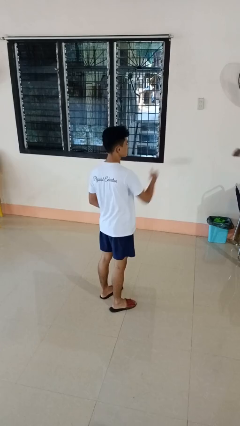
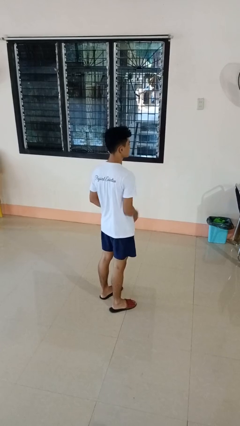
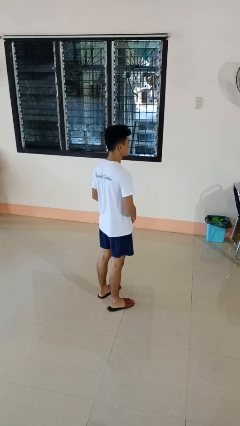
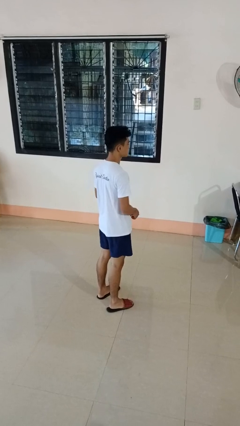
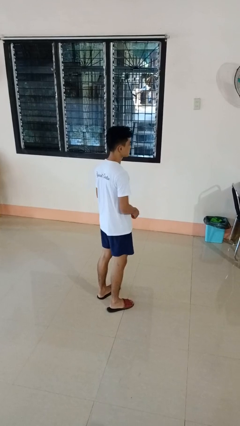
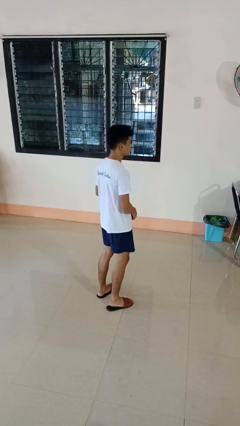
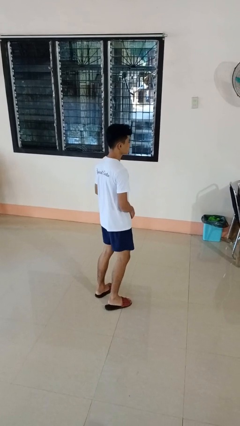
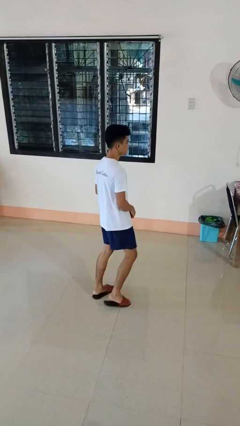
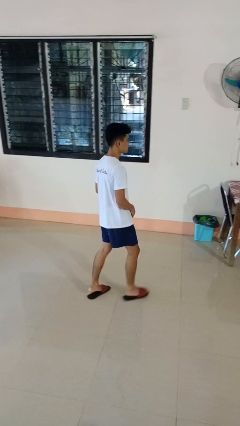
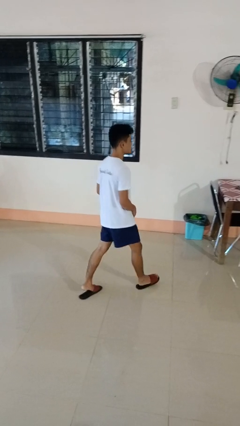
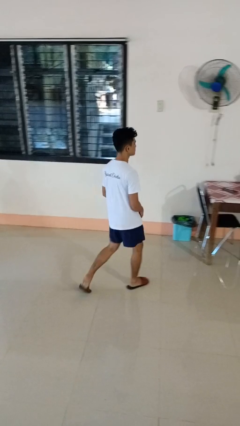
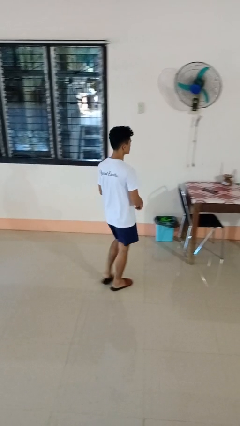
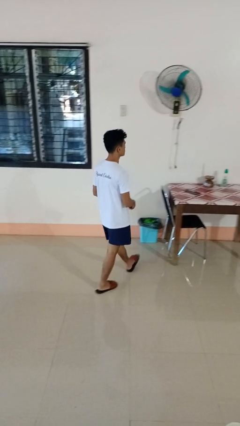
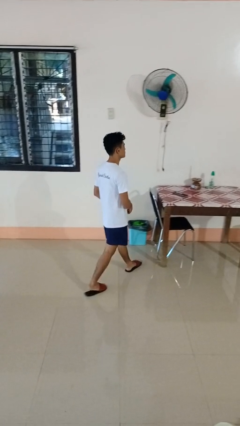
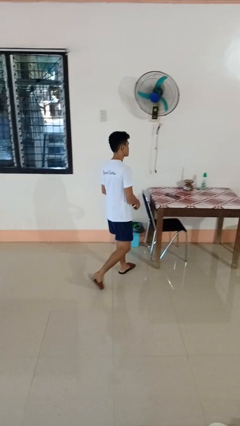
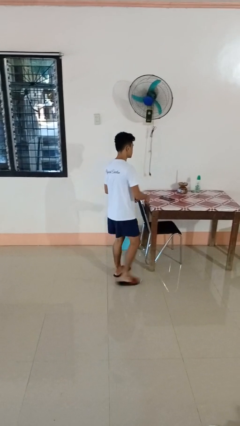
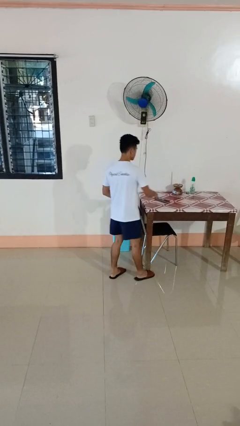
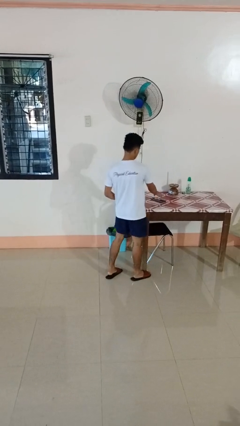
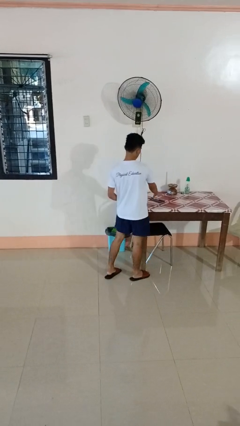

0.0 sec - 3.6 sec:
person throws object on table

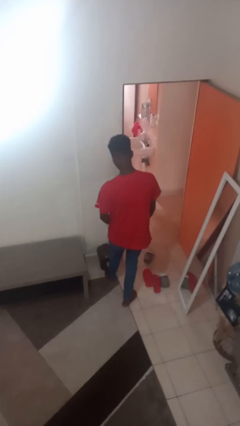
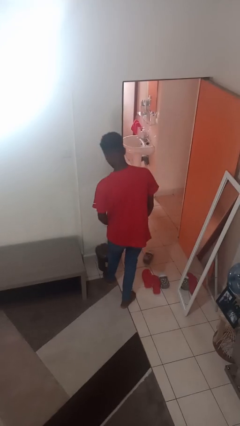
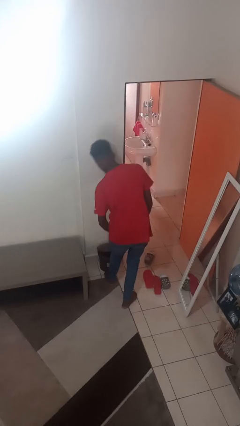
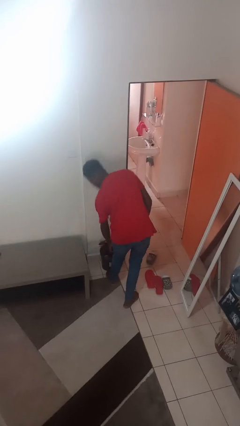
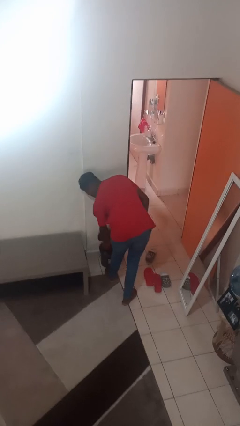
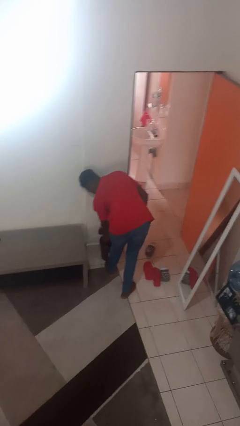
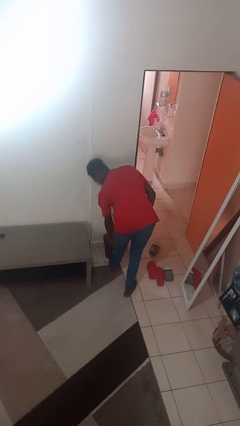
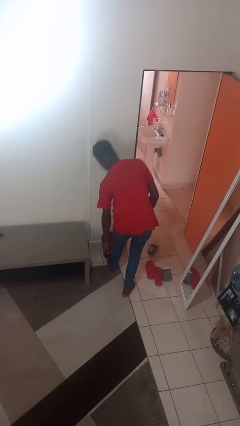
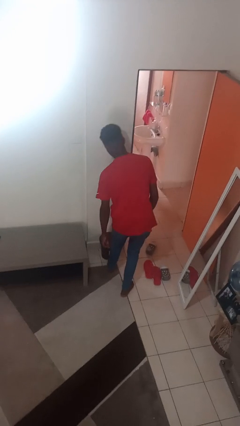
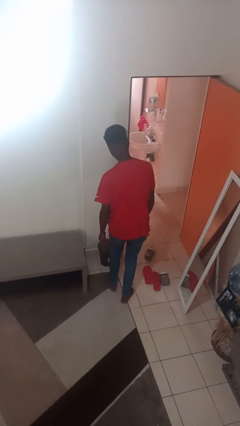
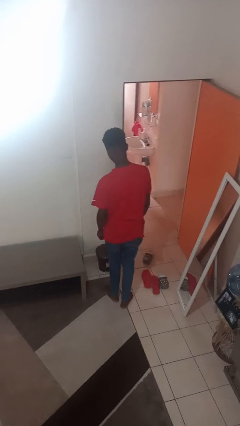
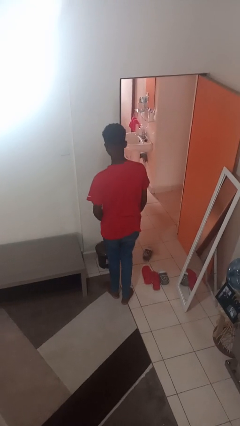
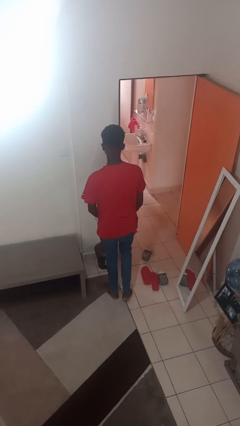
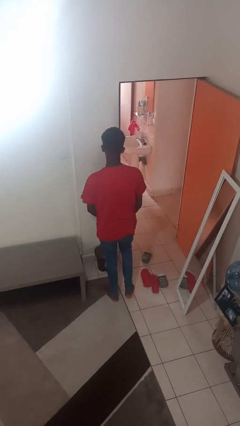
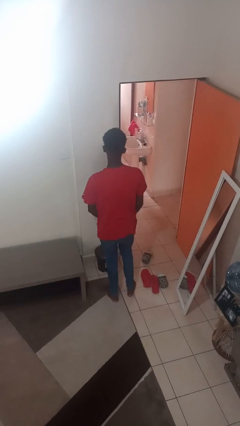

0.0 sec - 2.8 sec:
person discards trash

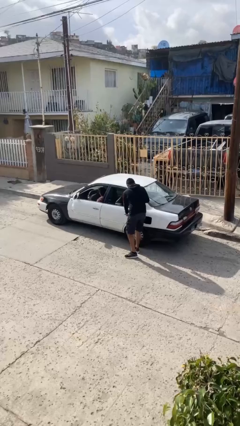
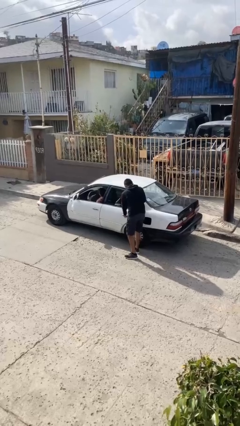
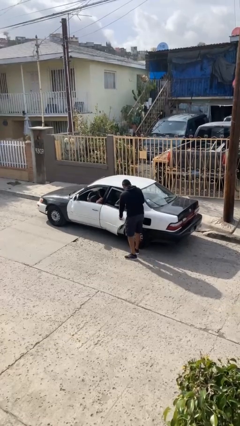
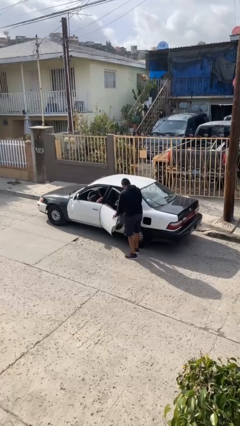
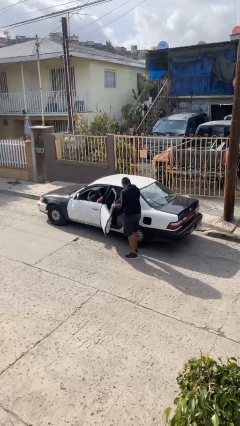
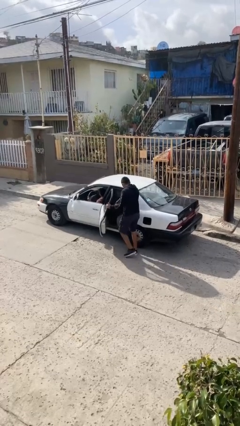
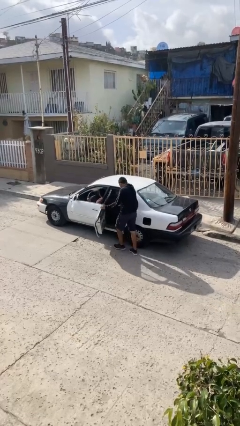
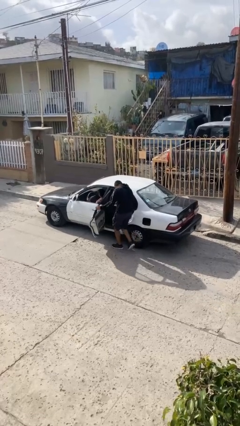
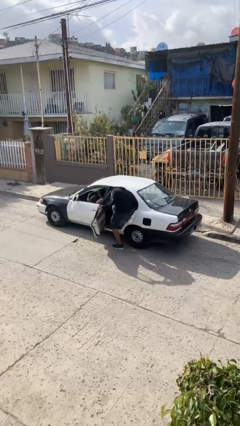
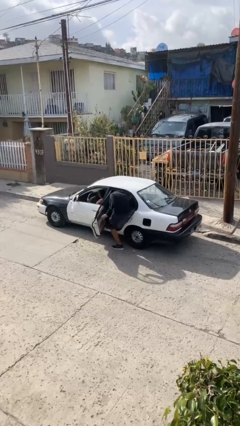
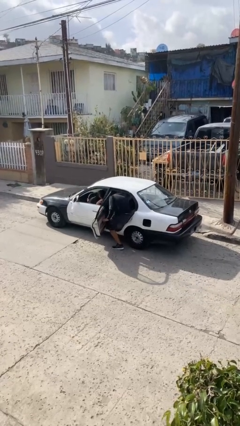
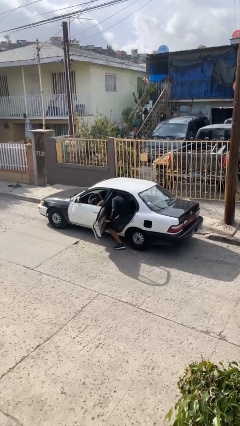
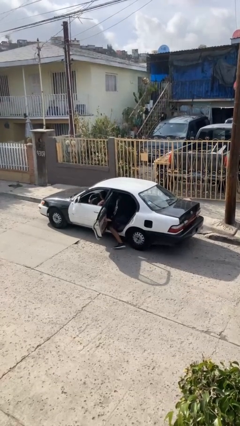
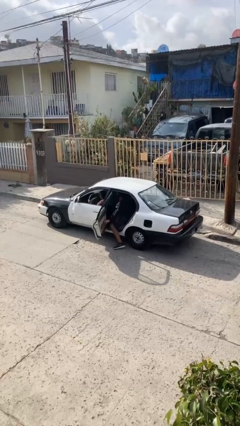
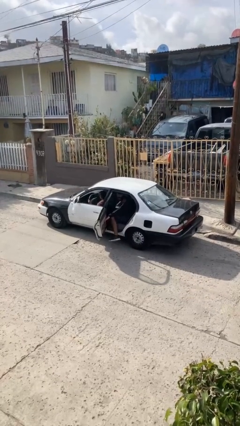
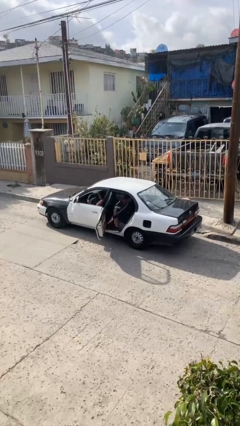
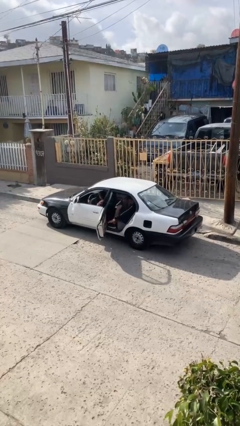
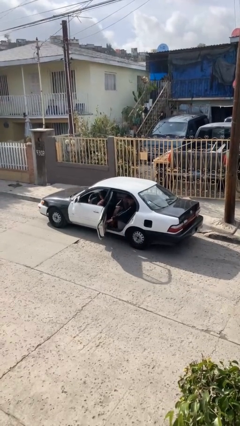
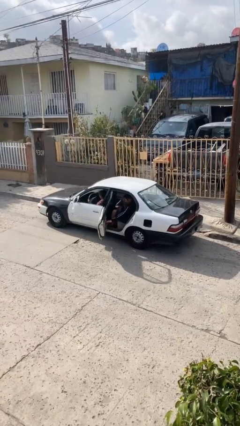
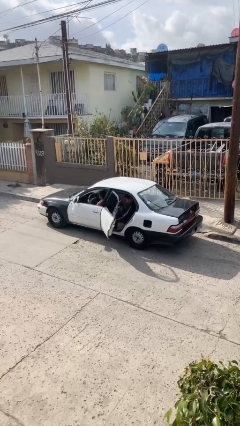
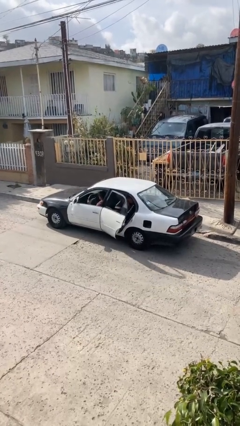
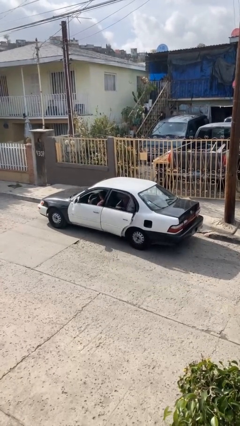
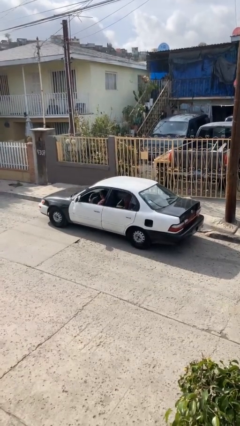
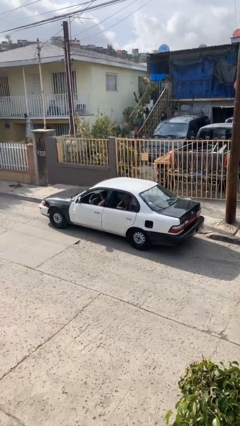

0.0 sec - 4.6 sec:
car picks up person

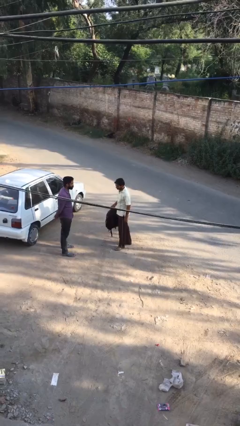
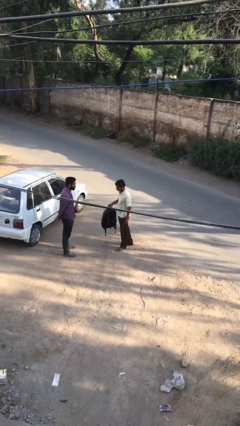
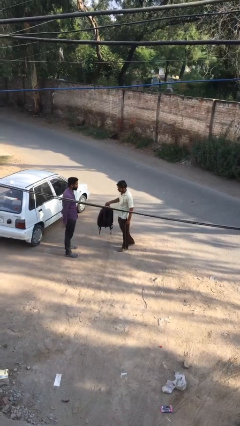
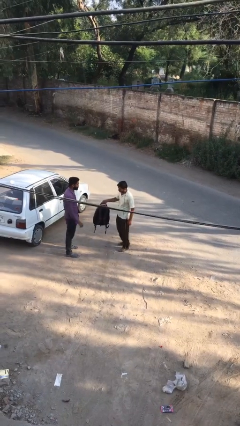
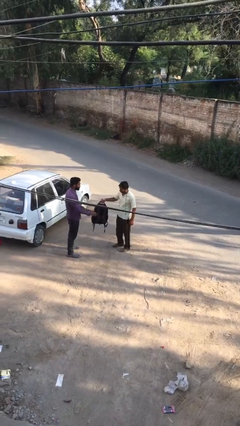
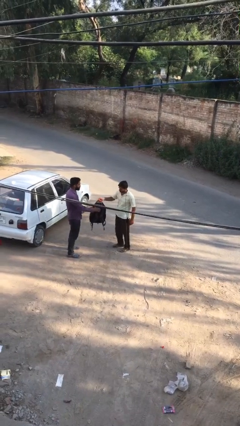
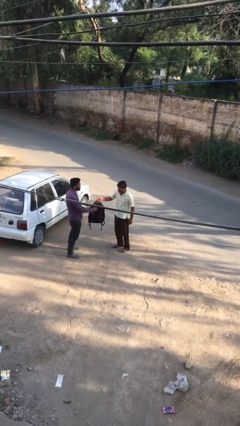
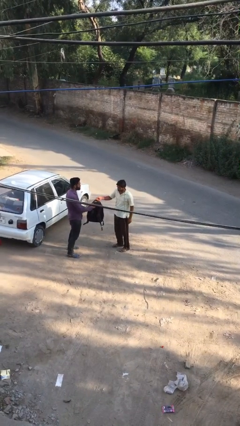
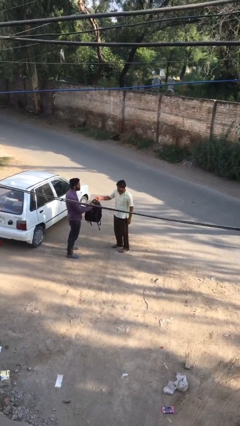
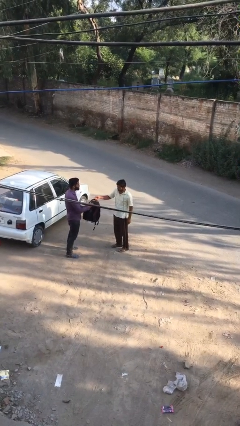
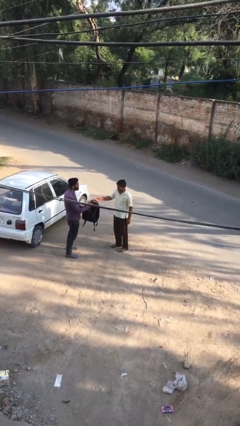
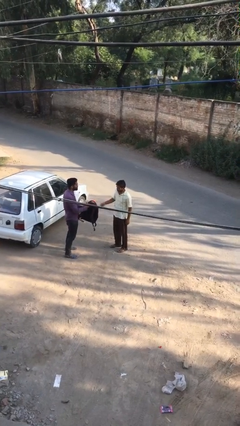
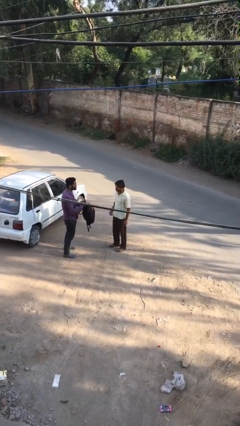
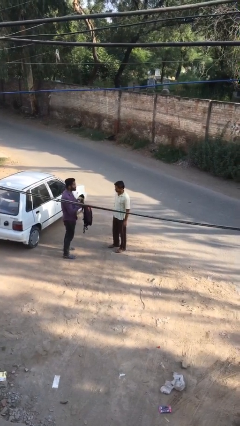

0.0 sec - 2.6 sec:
person transfers object to person

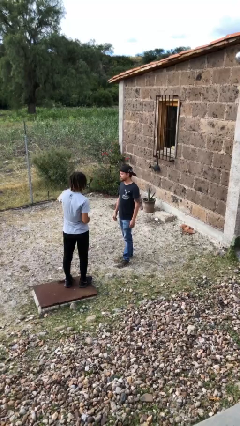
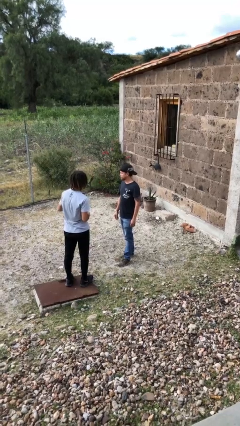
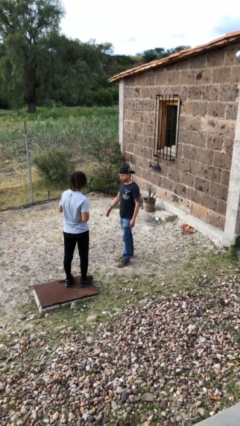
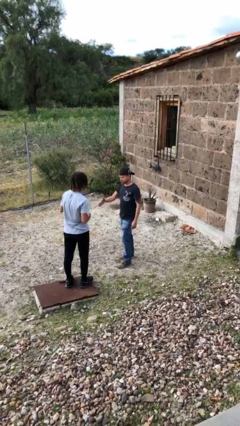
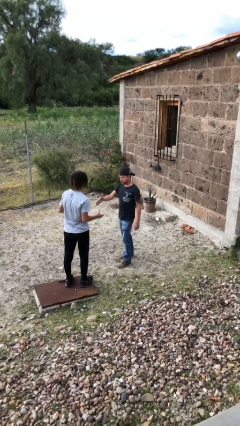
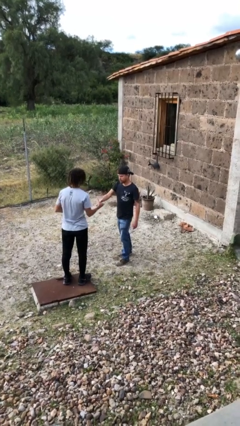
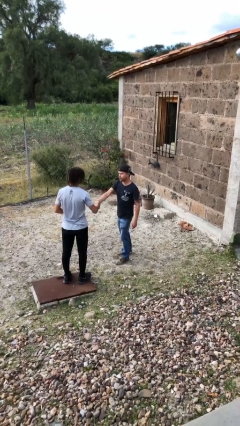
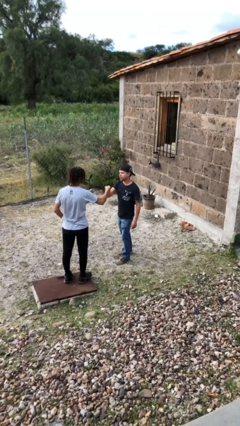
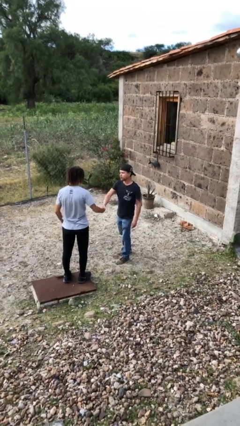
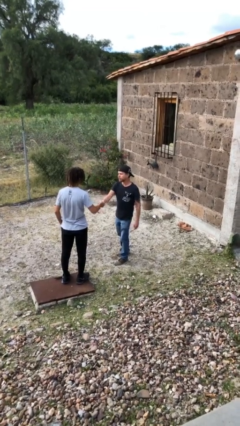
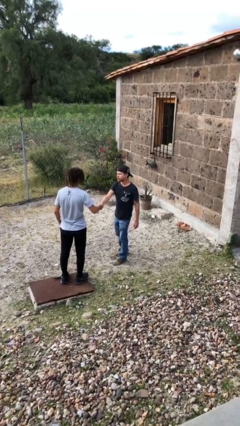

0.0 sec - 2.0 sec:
person shakes hand

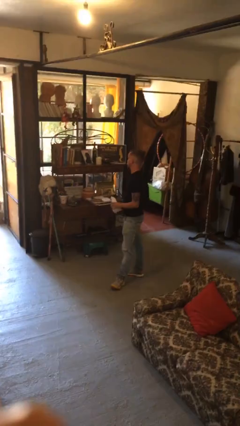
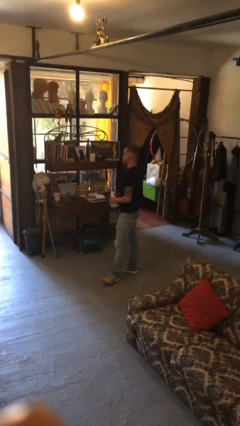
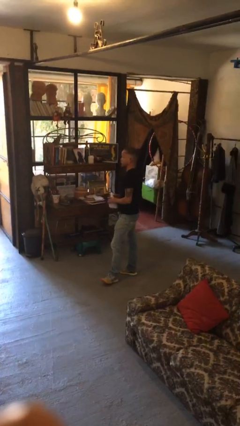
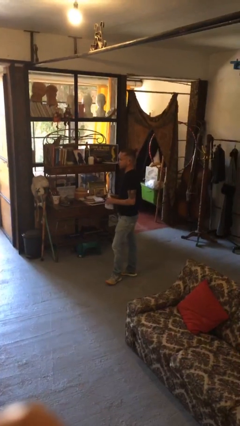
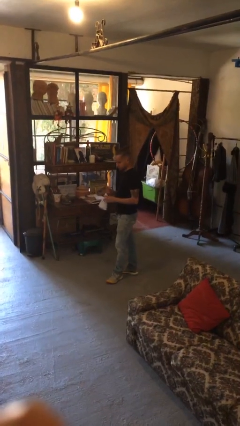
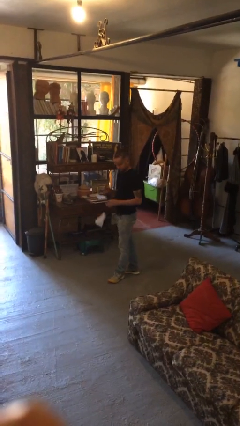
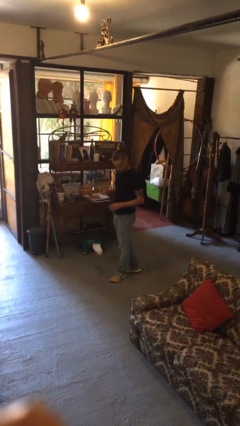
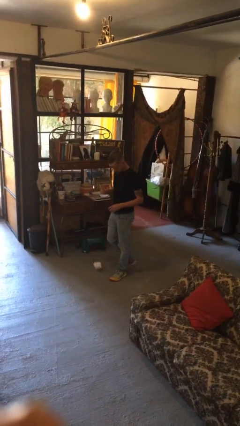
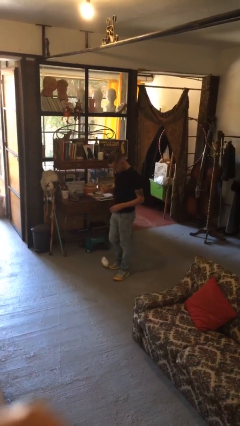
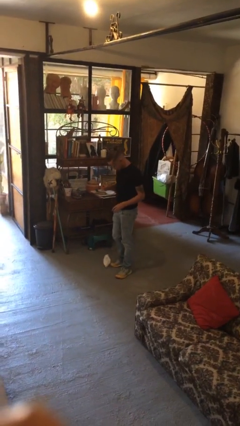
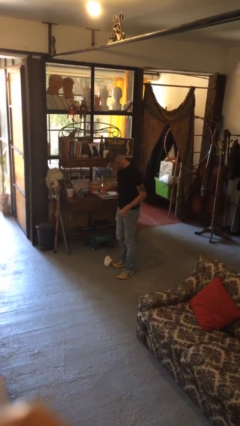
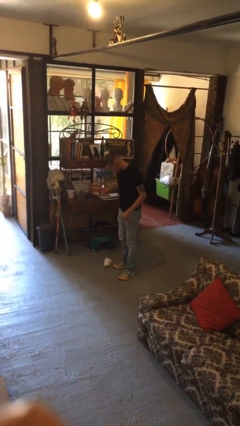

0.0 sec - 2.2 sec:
person drops object
